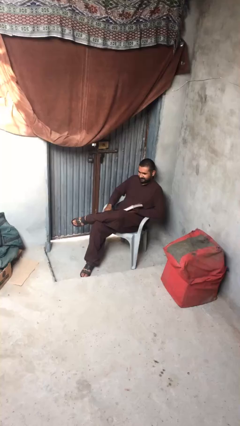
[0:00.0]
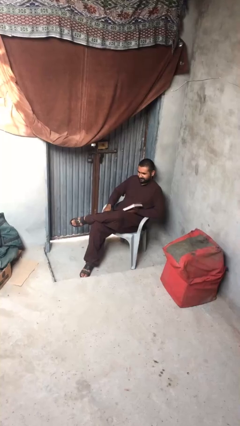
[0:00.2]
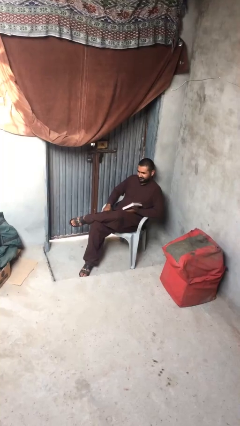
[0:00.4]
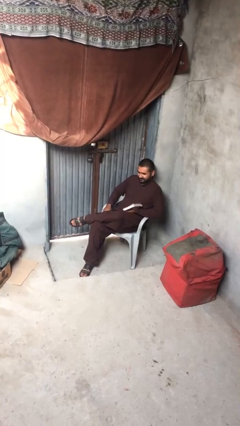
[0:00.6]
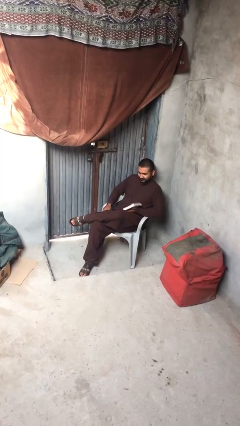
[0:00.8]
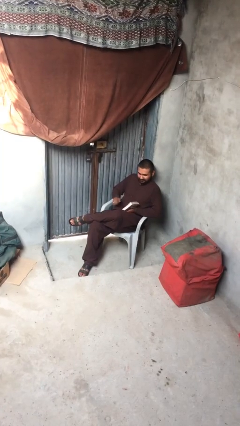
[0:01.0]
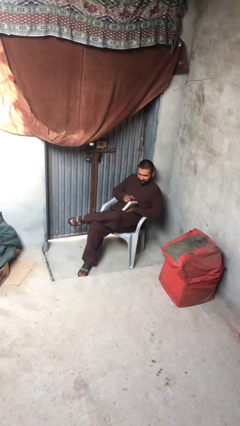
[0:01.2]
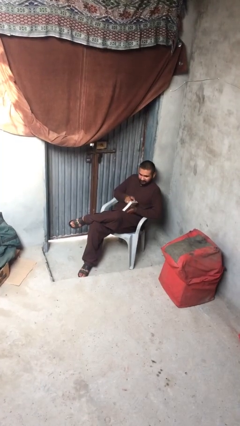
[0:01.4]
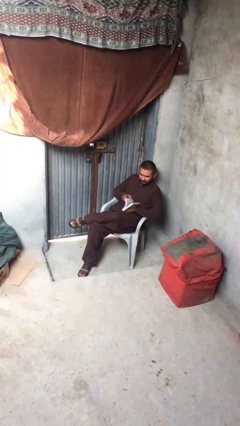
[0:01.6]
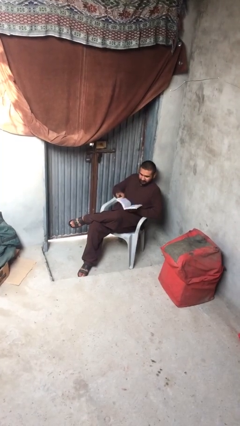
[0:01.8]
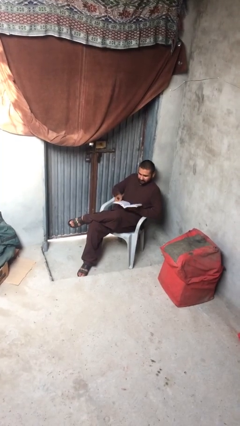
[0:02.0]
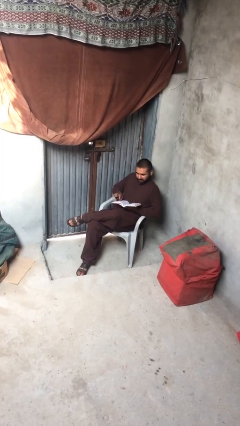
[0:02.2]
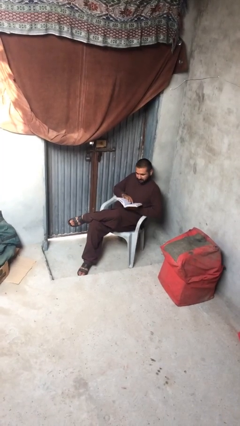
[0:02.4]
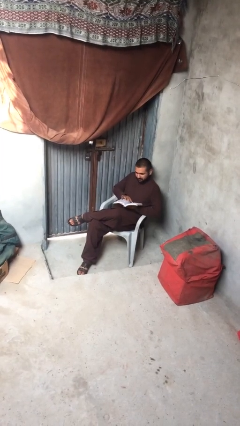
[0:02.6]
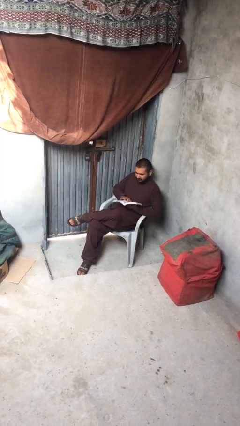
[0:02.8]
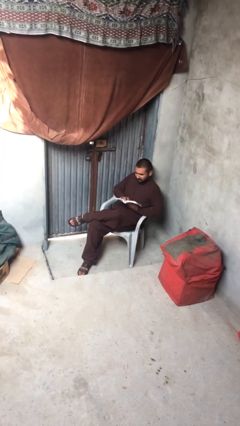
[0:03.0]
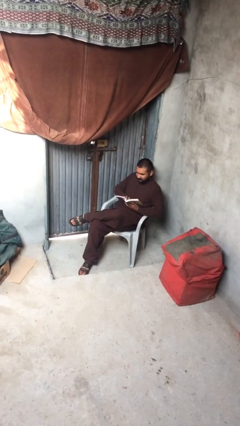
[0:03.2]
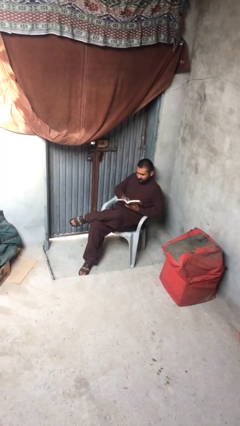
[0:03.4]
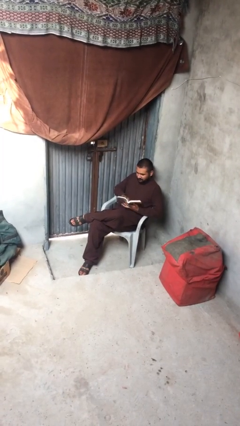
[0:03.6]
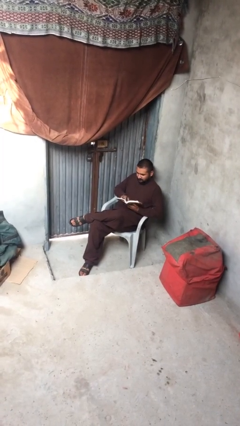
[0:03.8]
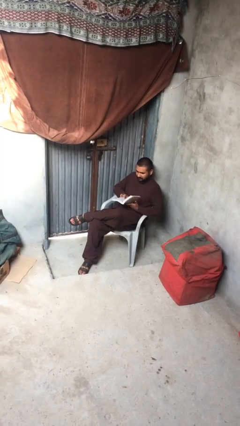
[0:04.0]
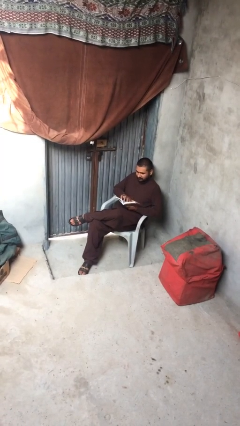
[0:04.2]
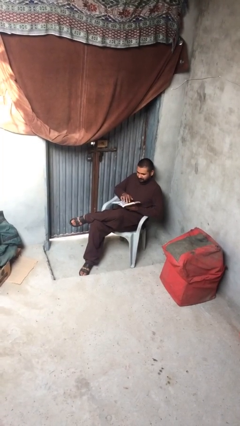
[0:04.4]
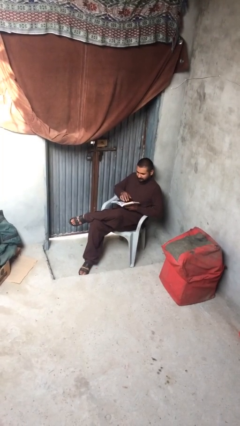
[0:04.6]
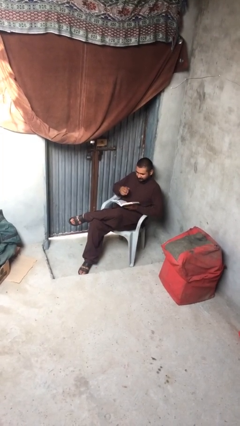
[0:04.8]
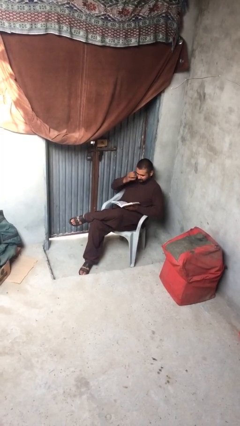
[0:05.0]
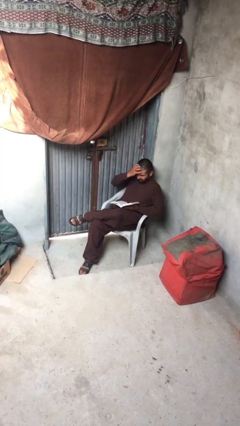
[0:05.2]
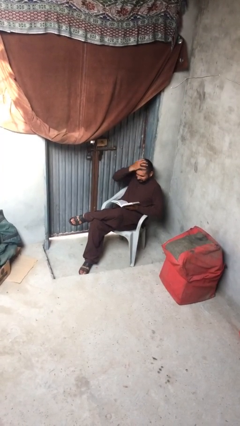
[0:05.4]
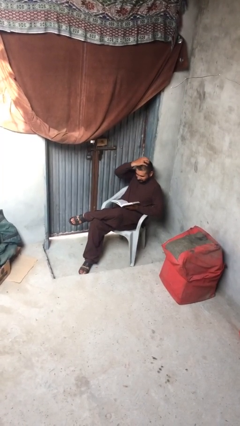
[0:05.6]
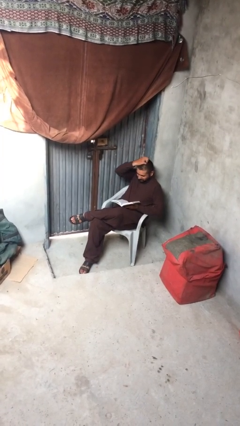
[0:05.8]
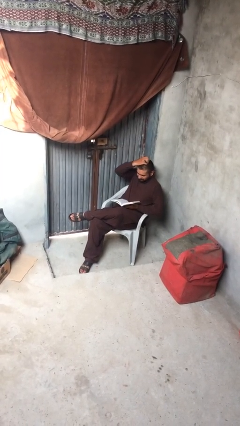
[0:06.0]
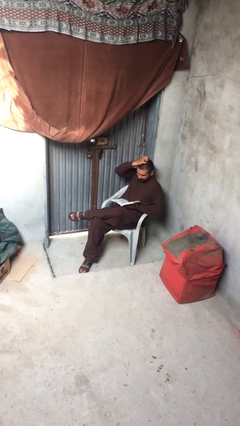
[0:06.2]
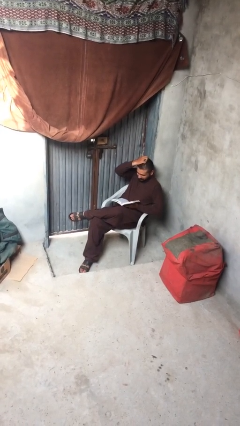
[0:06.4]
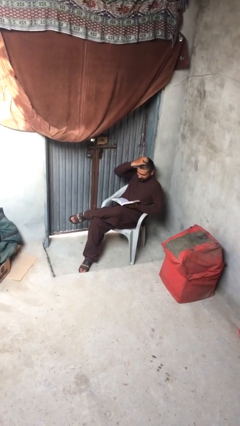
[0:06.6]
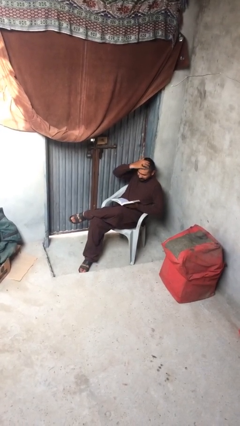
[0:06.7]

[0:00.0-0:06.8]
person reads document

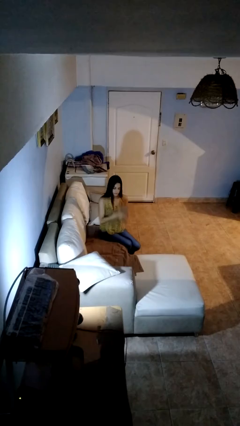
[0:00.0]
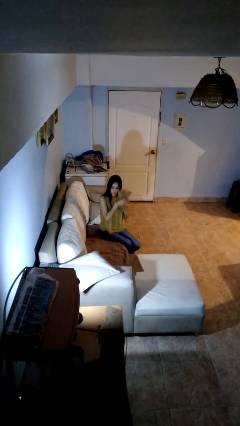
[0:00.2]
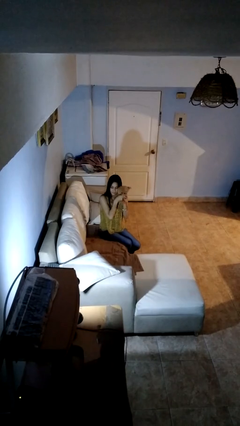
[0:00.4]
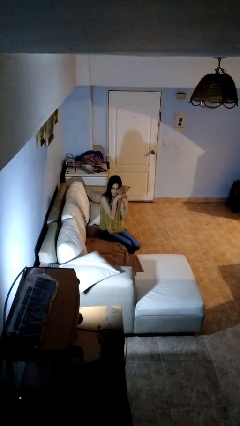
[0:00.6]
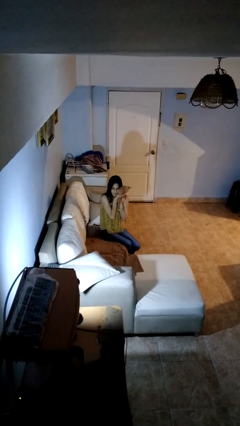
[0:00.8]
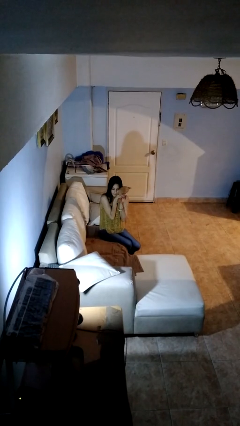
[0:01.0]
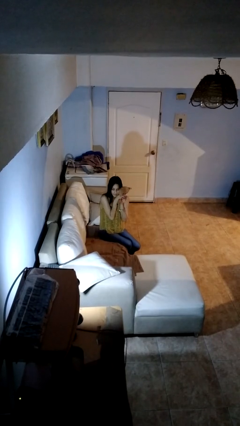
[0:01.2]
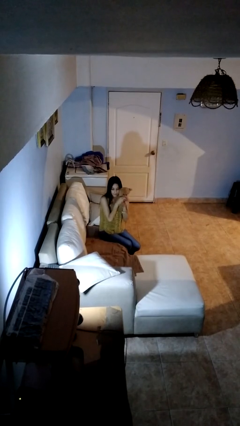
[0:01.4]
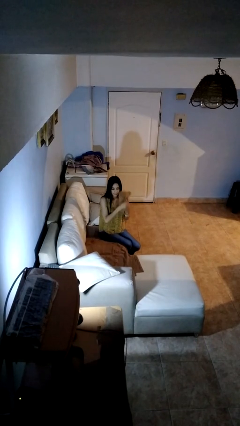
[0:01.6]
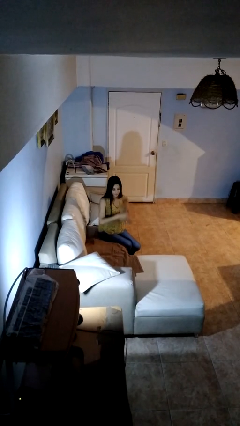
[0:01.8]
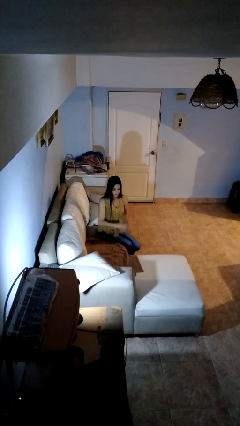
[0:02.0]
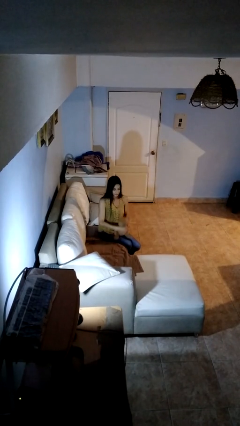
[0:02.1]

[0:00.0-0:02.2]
person hugs stuffed animal

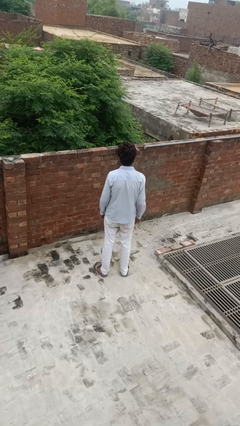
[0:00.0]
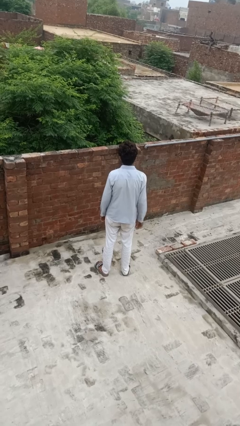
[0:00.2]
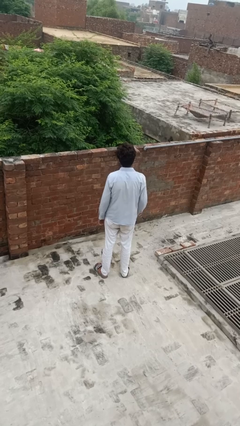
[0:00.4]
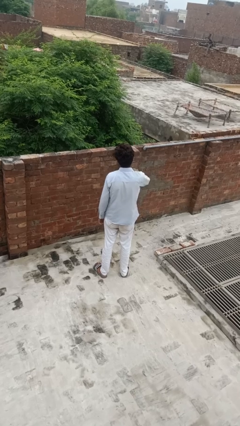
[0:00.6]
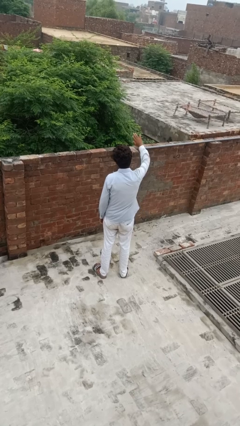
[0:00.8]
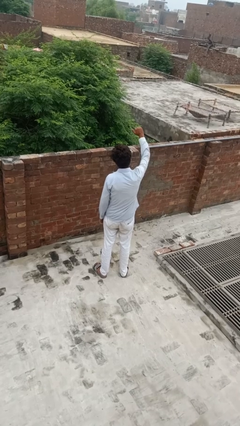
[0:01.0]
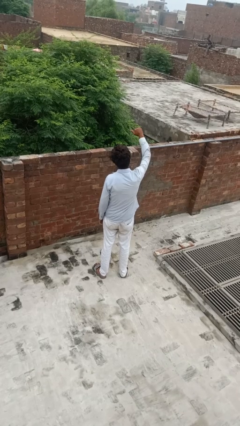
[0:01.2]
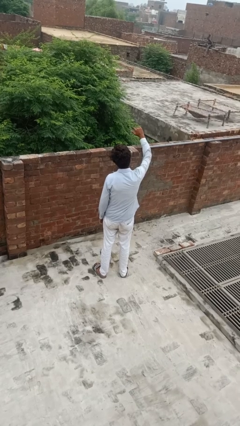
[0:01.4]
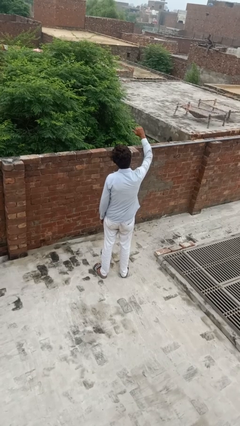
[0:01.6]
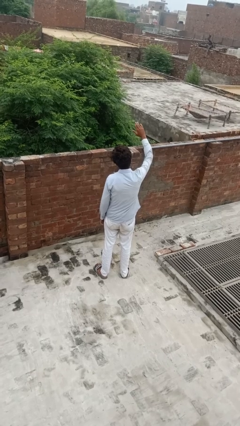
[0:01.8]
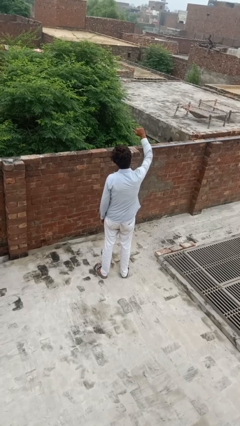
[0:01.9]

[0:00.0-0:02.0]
person gestures come here

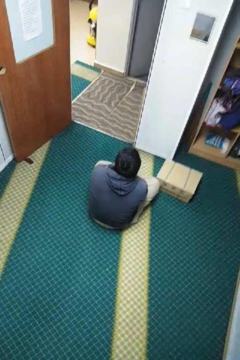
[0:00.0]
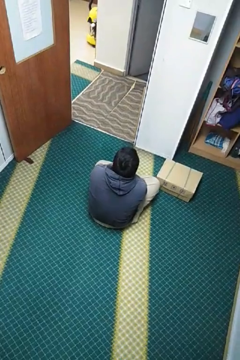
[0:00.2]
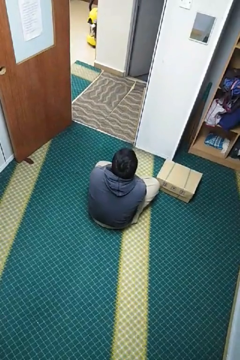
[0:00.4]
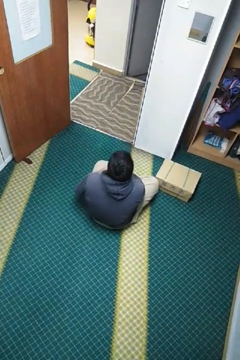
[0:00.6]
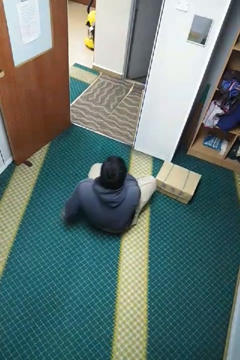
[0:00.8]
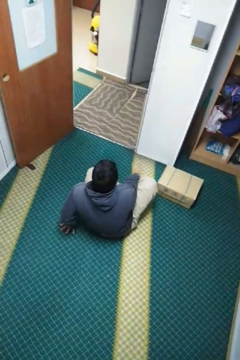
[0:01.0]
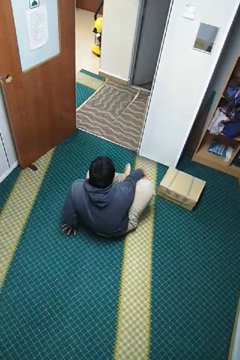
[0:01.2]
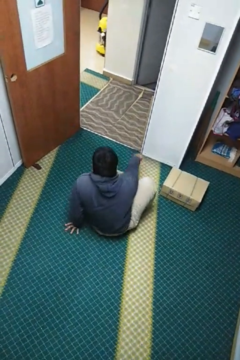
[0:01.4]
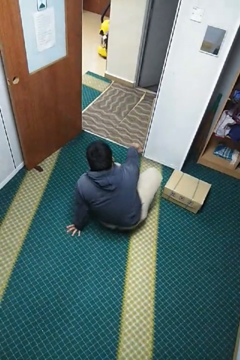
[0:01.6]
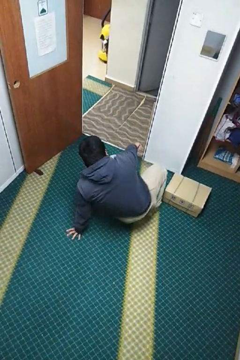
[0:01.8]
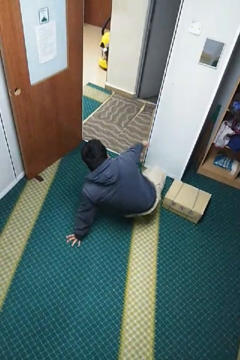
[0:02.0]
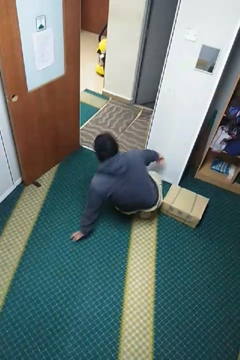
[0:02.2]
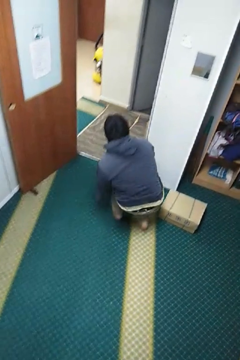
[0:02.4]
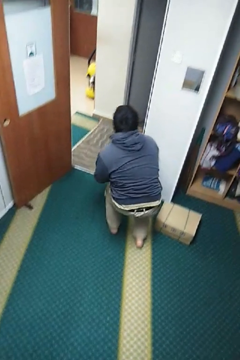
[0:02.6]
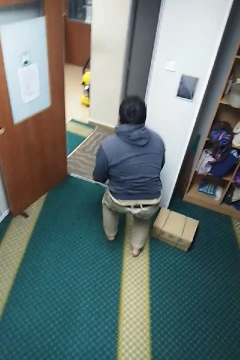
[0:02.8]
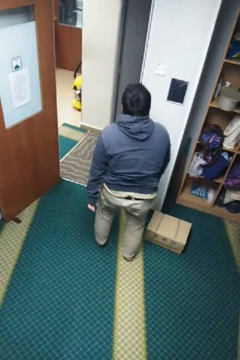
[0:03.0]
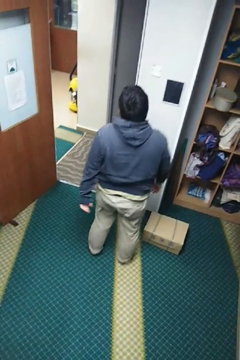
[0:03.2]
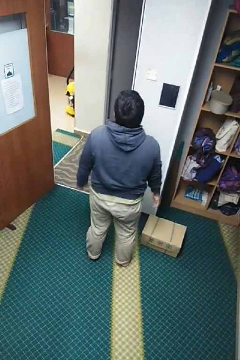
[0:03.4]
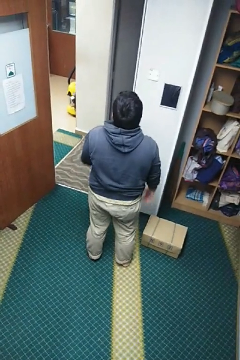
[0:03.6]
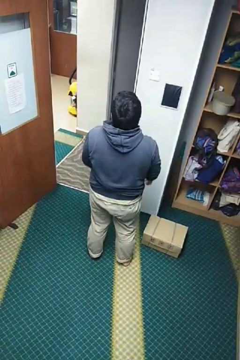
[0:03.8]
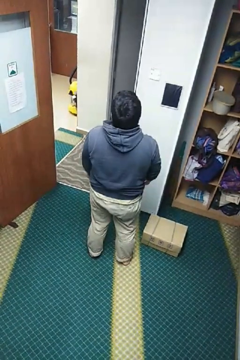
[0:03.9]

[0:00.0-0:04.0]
person stands up from floor

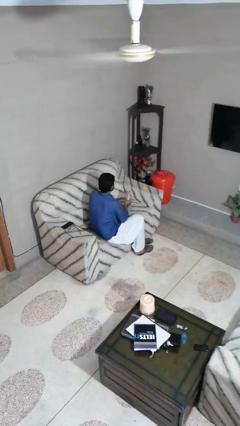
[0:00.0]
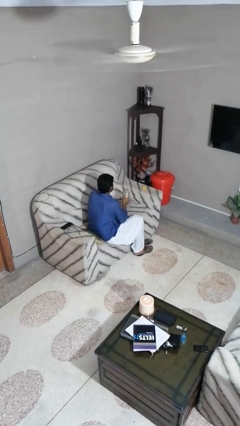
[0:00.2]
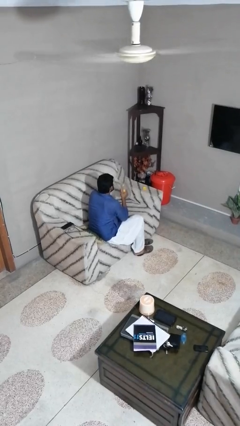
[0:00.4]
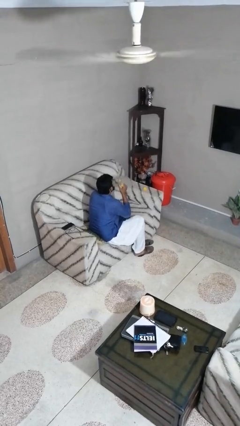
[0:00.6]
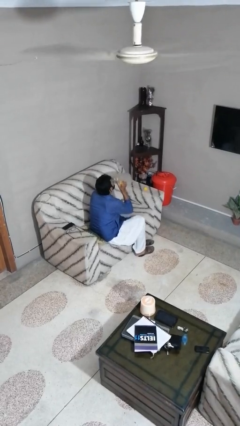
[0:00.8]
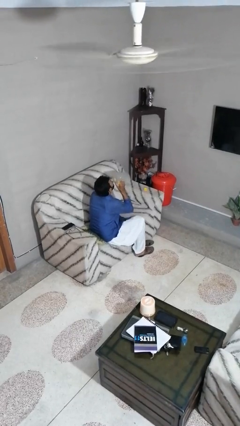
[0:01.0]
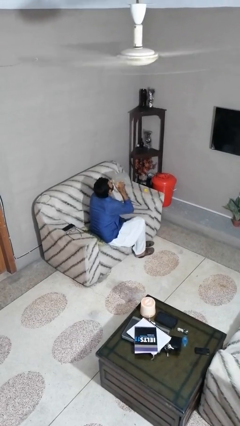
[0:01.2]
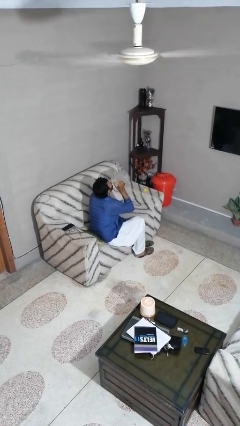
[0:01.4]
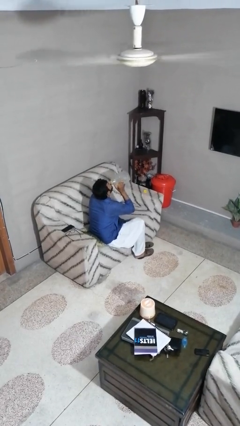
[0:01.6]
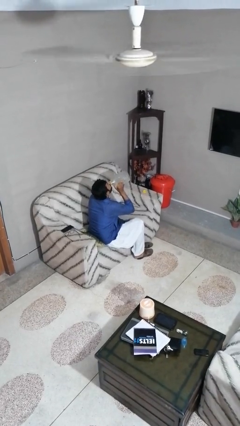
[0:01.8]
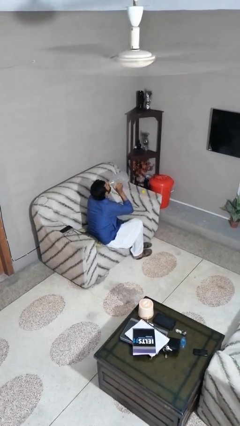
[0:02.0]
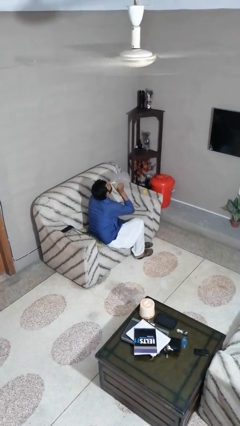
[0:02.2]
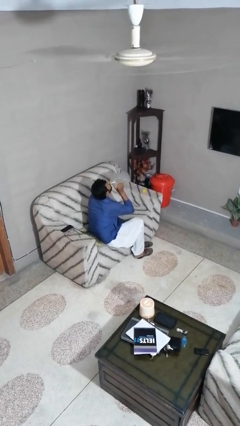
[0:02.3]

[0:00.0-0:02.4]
person drinks from bottle

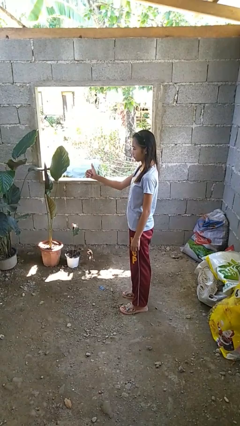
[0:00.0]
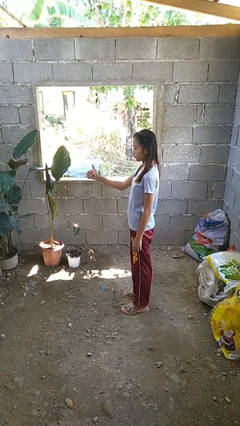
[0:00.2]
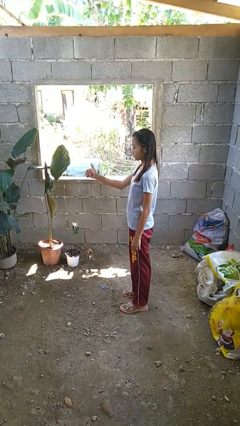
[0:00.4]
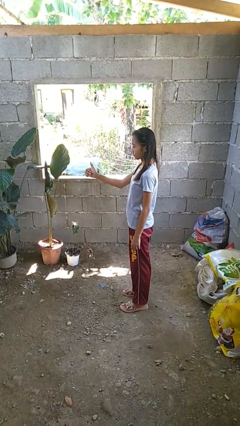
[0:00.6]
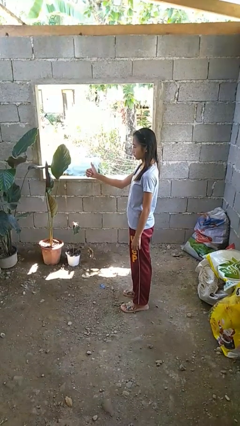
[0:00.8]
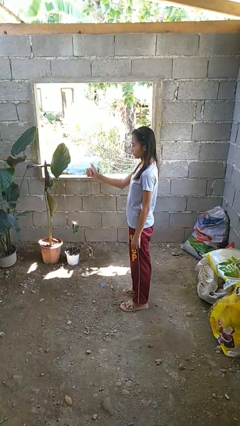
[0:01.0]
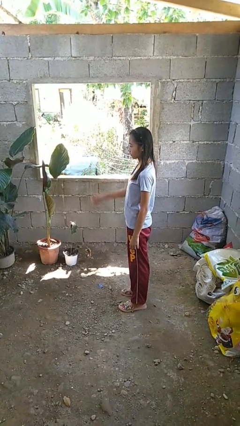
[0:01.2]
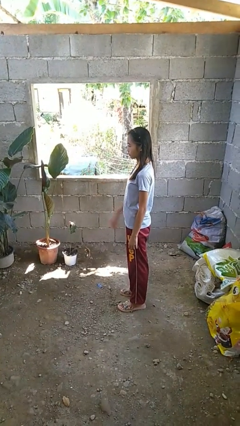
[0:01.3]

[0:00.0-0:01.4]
person gestures thumbs up
